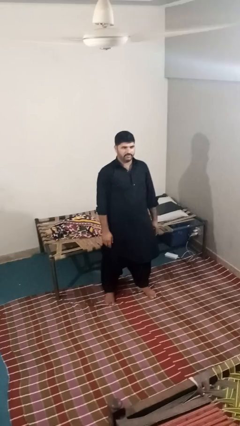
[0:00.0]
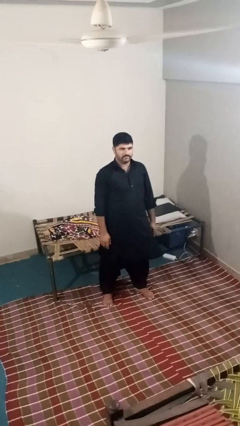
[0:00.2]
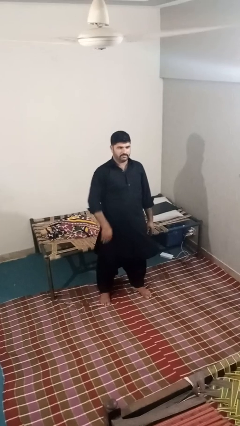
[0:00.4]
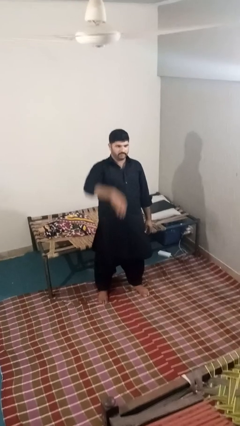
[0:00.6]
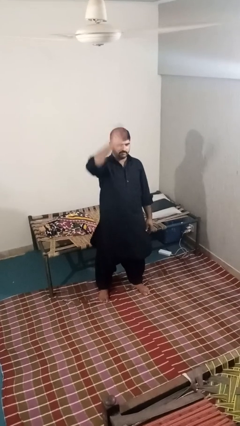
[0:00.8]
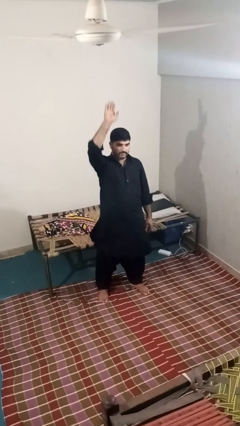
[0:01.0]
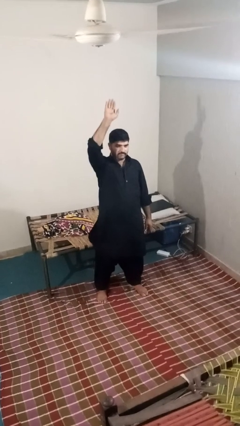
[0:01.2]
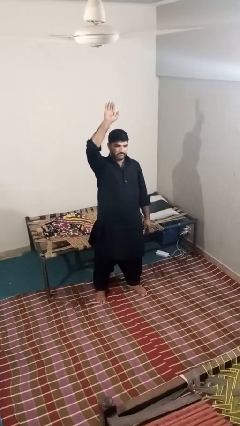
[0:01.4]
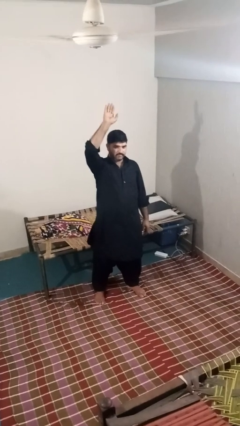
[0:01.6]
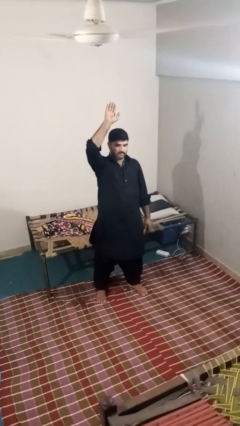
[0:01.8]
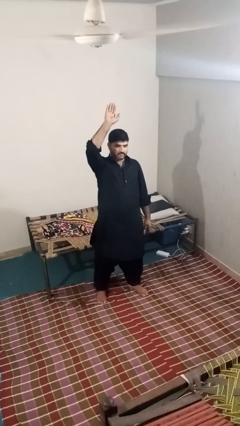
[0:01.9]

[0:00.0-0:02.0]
person gestures raise hand

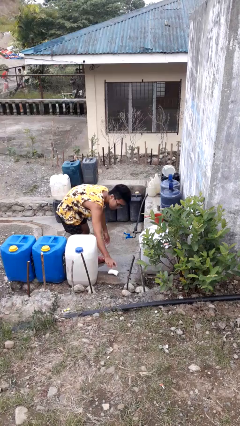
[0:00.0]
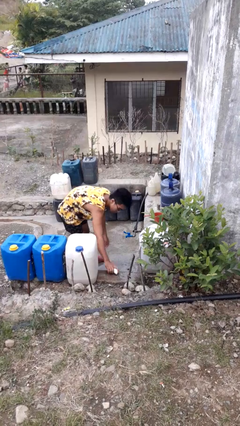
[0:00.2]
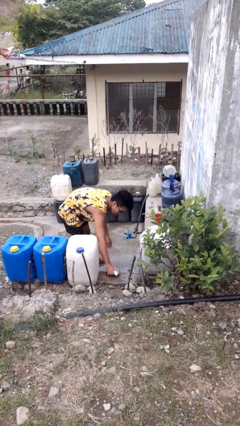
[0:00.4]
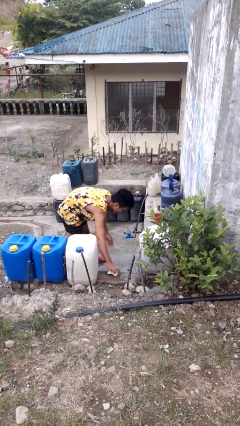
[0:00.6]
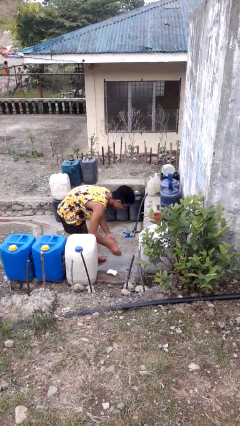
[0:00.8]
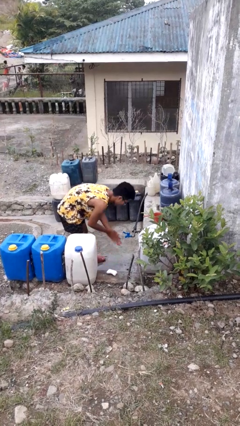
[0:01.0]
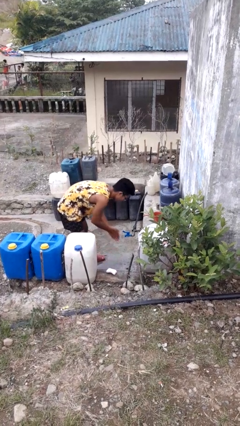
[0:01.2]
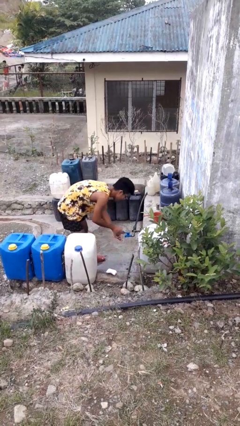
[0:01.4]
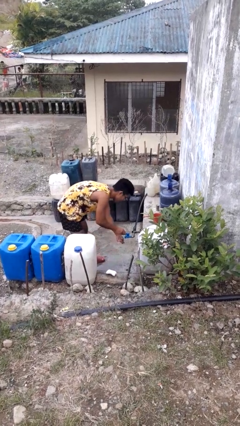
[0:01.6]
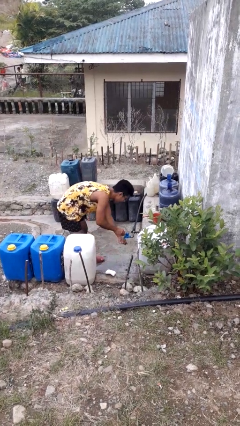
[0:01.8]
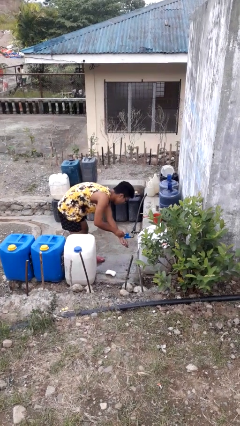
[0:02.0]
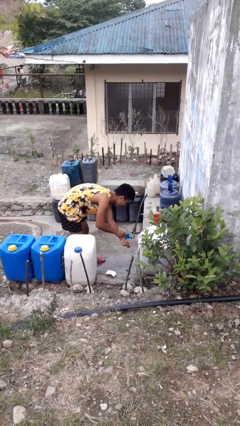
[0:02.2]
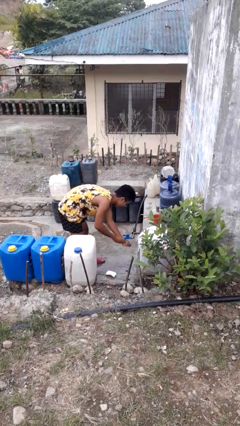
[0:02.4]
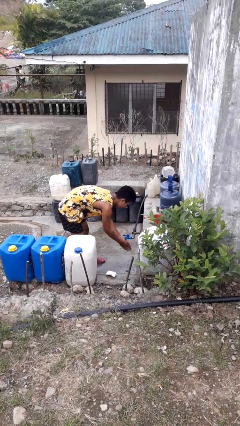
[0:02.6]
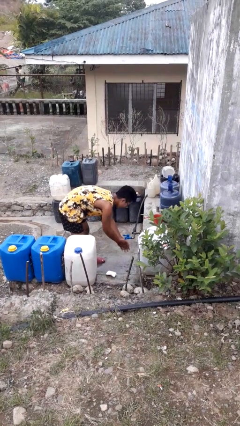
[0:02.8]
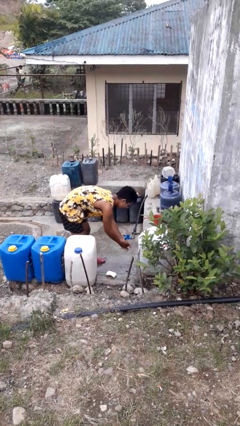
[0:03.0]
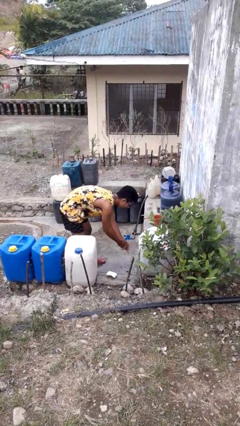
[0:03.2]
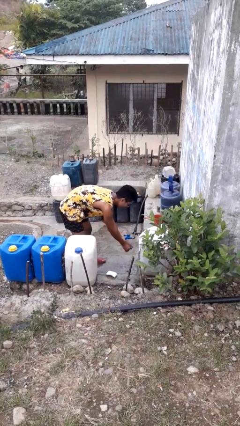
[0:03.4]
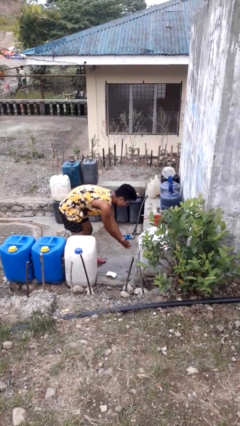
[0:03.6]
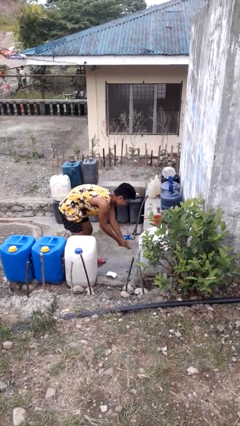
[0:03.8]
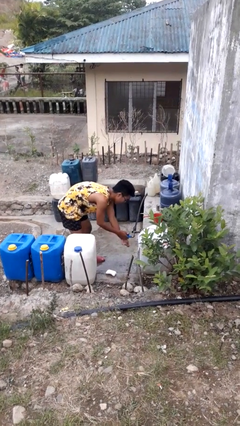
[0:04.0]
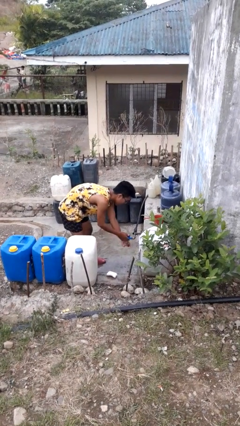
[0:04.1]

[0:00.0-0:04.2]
person washes hands

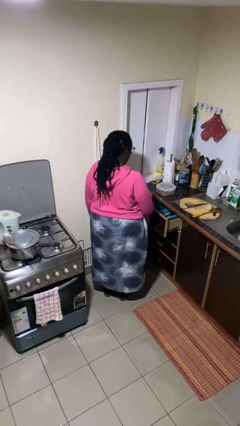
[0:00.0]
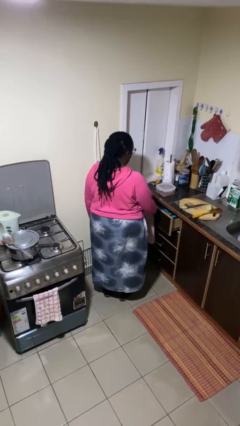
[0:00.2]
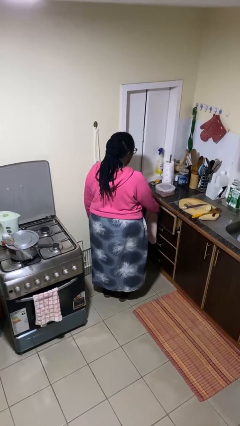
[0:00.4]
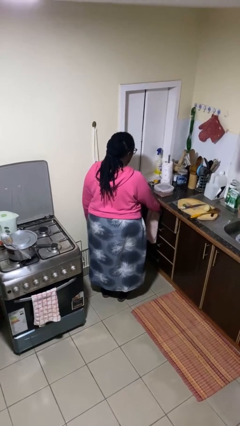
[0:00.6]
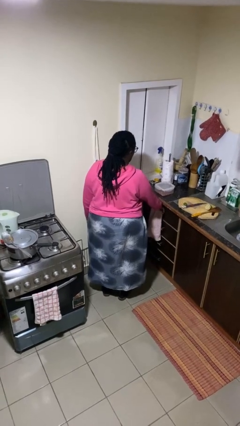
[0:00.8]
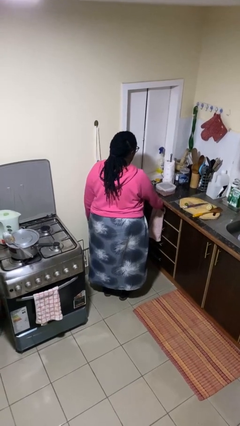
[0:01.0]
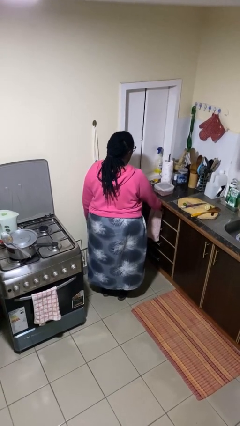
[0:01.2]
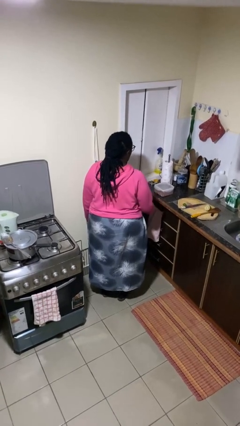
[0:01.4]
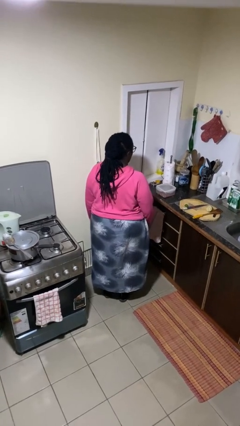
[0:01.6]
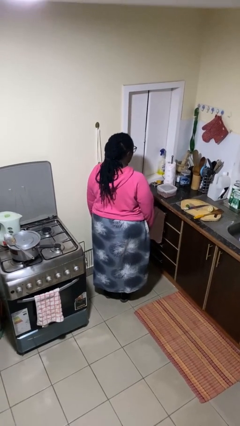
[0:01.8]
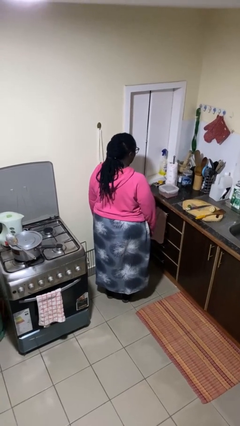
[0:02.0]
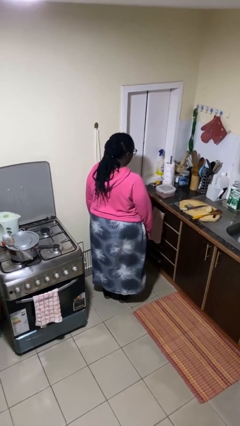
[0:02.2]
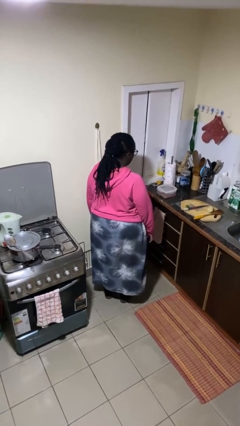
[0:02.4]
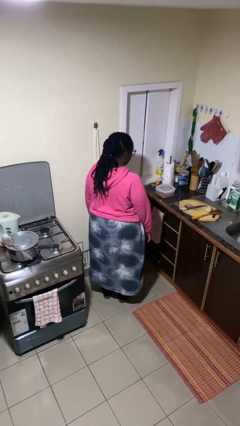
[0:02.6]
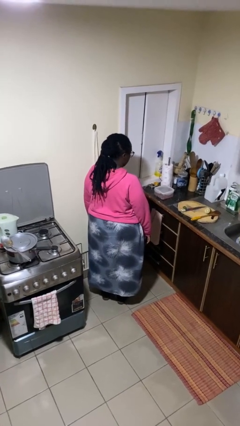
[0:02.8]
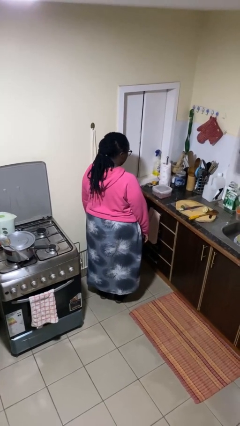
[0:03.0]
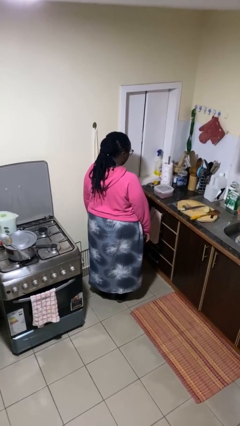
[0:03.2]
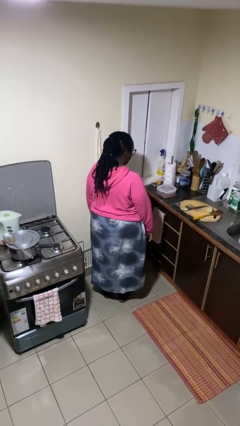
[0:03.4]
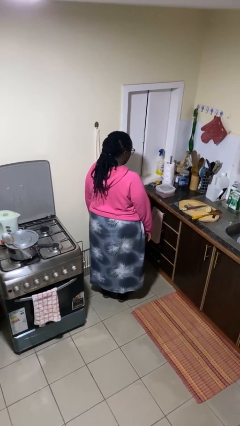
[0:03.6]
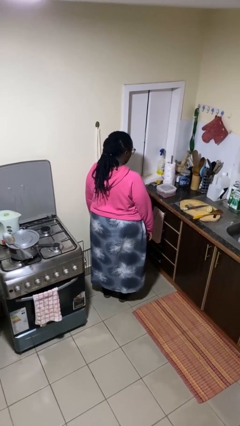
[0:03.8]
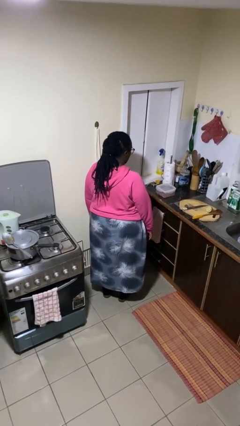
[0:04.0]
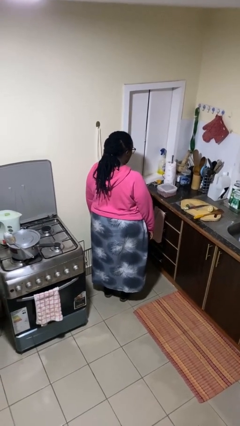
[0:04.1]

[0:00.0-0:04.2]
person closes kitchen drawer

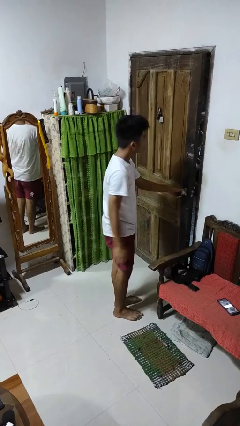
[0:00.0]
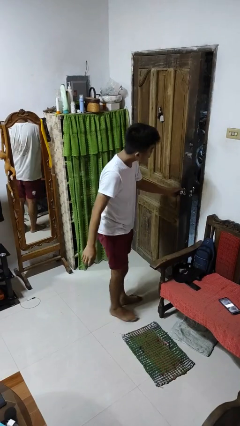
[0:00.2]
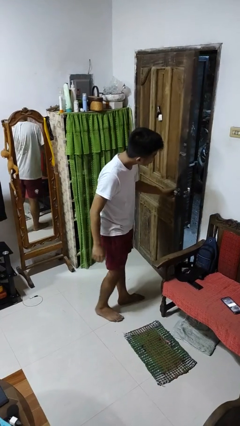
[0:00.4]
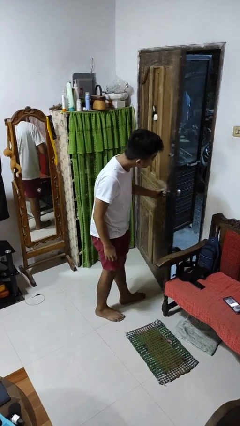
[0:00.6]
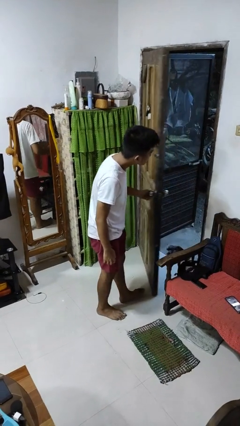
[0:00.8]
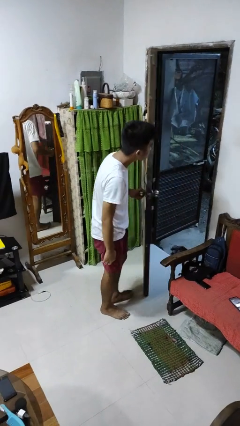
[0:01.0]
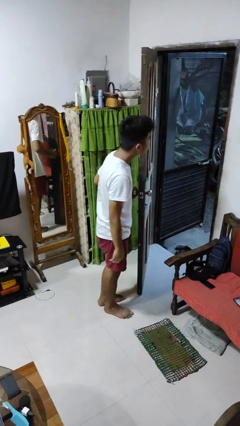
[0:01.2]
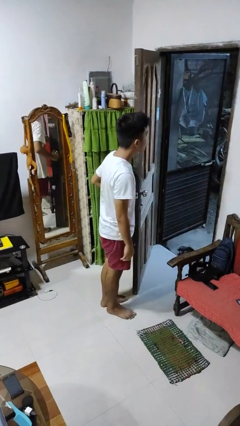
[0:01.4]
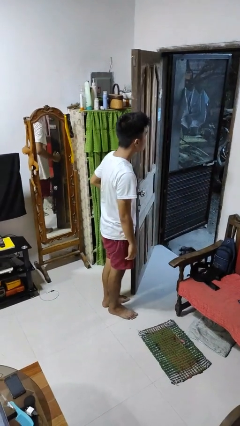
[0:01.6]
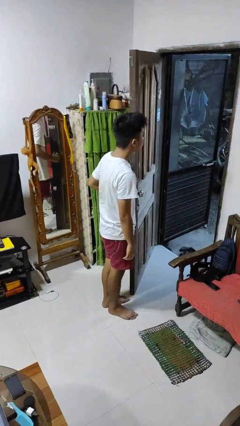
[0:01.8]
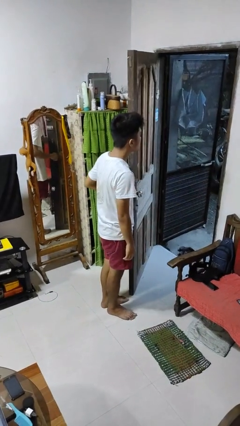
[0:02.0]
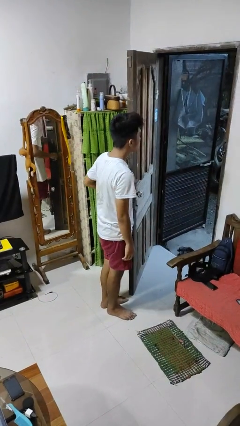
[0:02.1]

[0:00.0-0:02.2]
person opens facility door

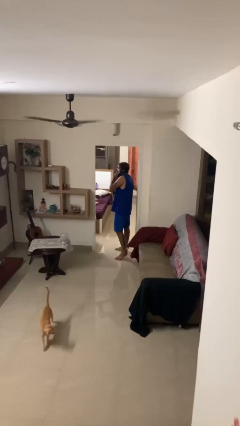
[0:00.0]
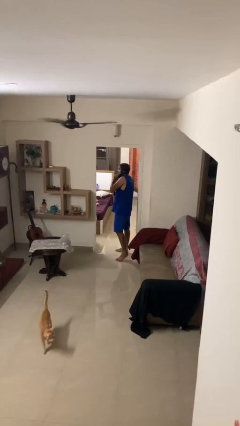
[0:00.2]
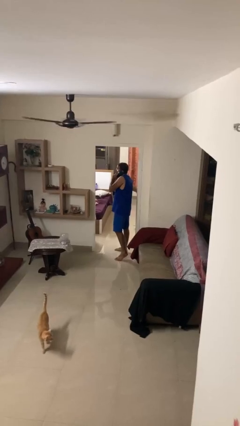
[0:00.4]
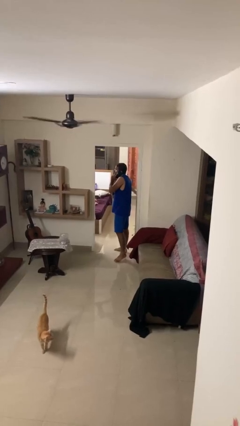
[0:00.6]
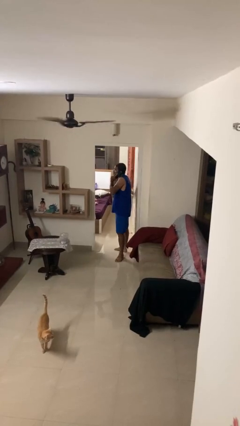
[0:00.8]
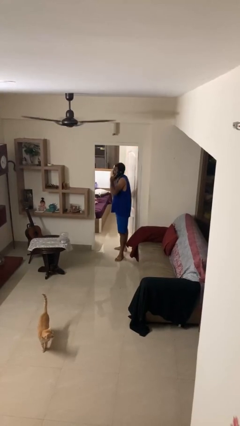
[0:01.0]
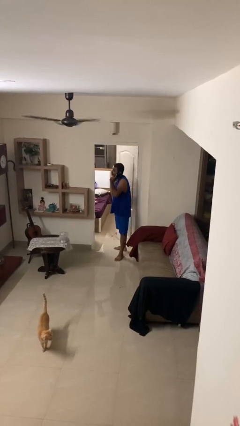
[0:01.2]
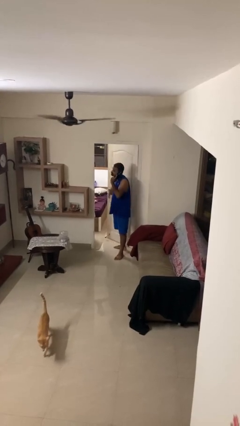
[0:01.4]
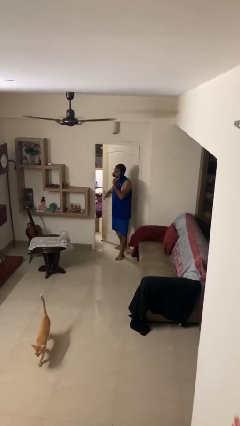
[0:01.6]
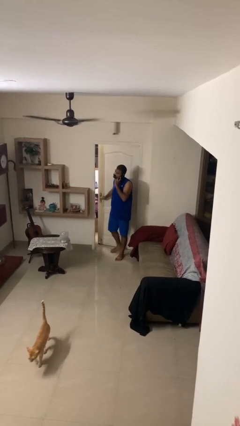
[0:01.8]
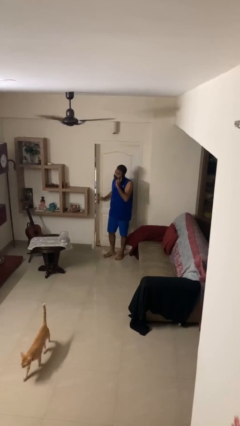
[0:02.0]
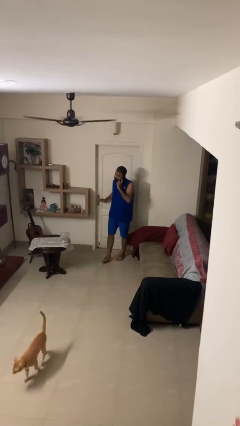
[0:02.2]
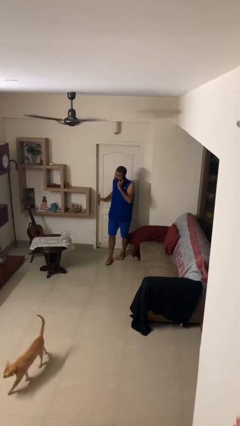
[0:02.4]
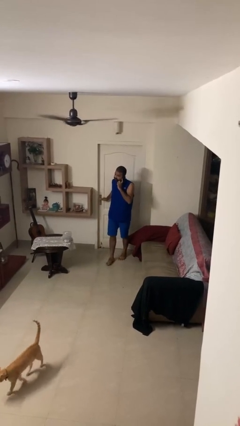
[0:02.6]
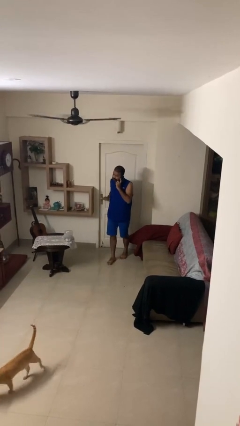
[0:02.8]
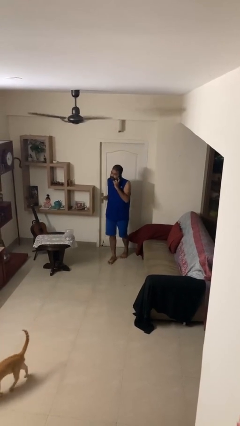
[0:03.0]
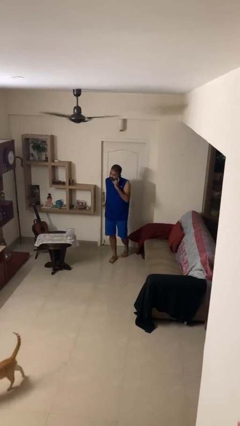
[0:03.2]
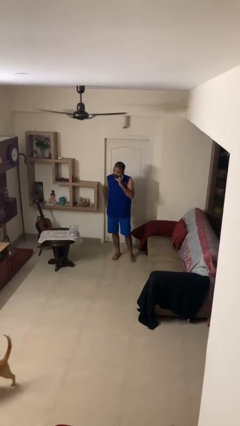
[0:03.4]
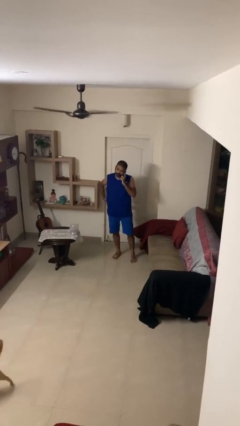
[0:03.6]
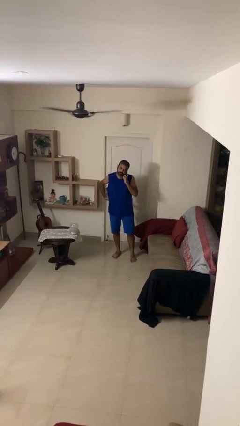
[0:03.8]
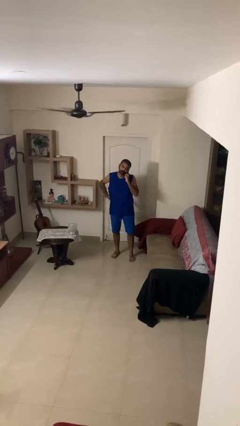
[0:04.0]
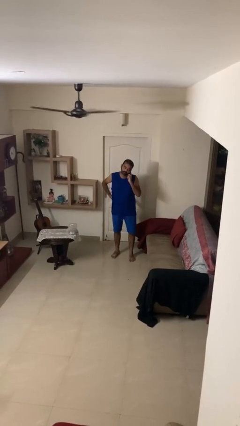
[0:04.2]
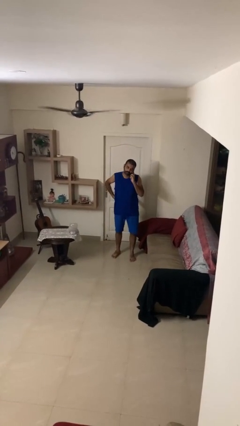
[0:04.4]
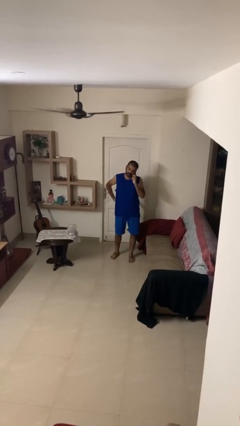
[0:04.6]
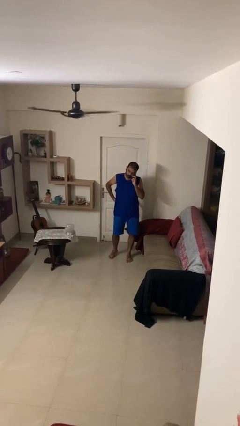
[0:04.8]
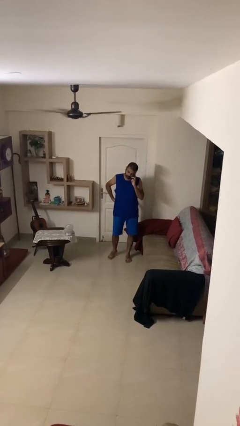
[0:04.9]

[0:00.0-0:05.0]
person closes facility door
